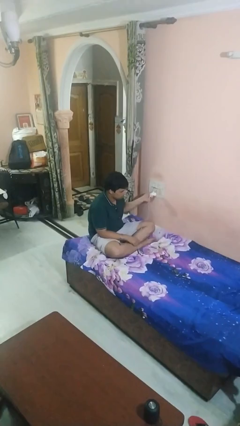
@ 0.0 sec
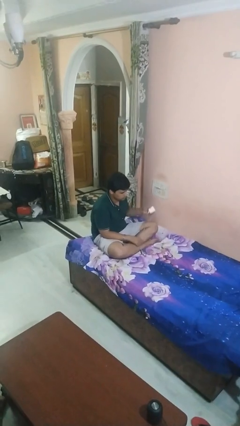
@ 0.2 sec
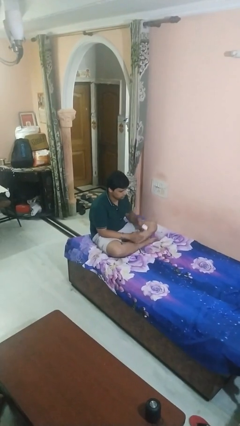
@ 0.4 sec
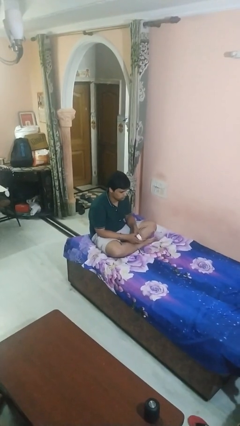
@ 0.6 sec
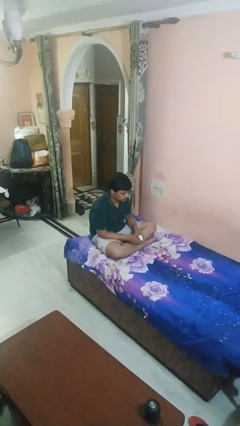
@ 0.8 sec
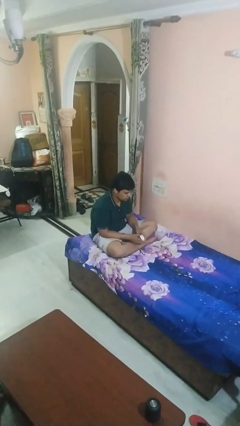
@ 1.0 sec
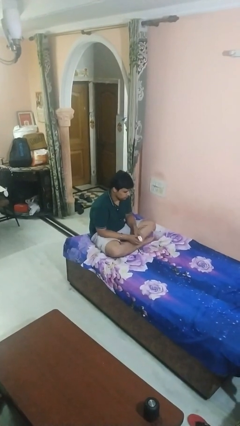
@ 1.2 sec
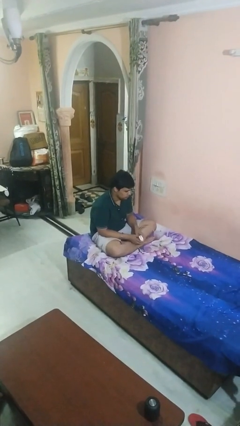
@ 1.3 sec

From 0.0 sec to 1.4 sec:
person unplugs from electrical socket

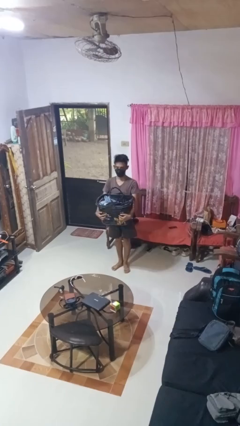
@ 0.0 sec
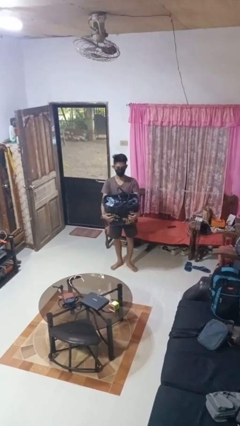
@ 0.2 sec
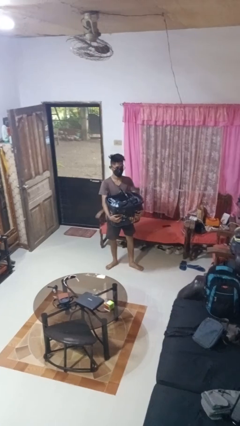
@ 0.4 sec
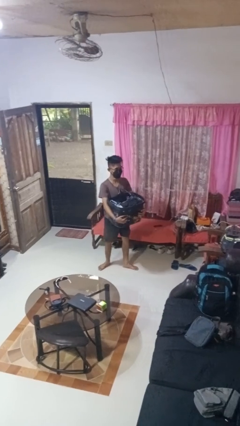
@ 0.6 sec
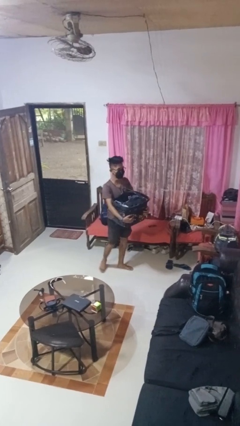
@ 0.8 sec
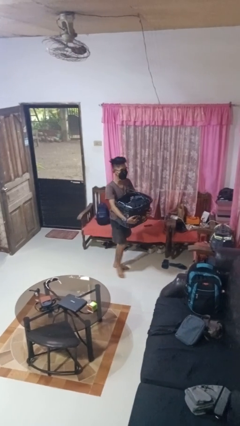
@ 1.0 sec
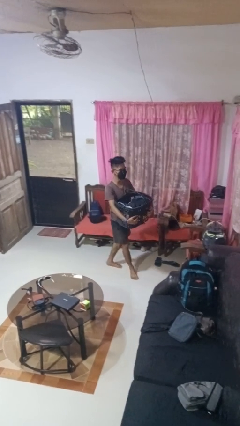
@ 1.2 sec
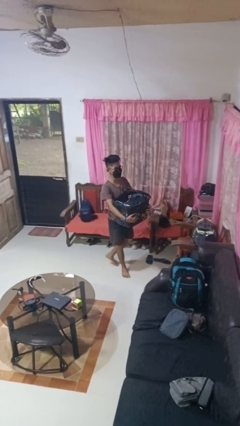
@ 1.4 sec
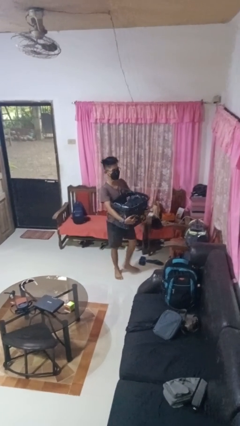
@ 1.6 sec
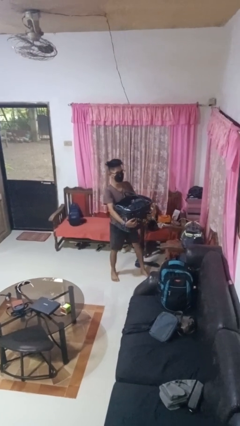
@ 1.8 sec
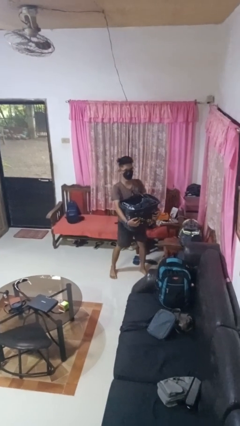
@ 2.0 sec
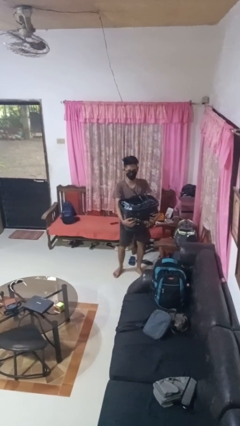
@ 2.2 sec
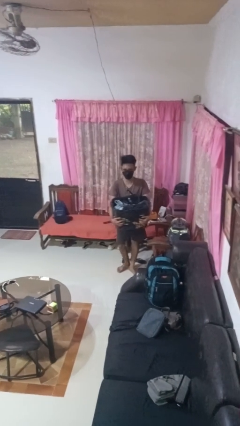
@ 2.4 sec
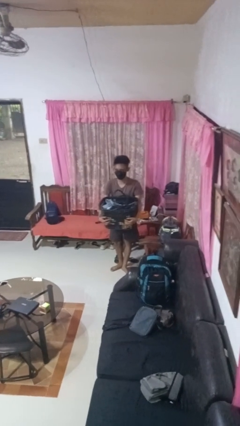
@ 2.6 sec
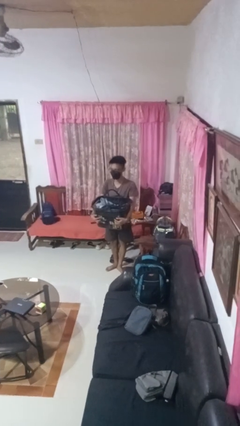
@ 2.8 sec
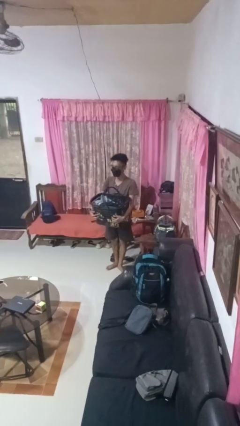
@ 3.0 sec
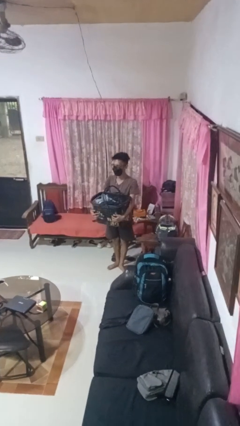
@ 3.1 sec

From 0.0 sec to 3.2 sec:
person carries laundry basket

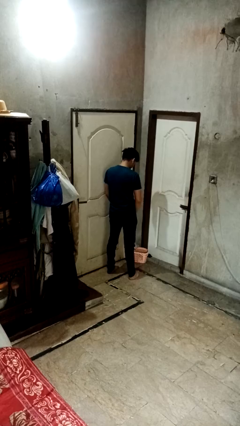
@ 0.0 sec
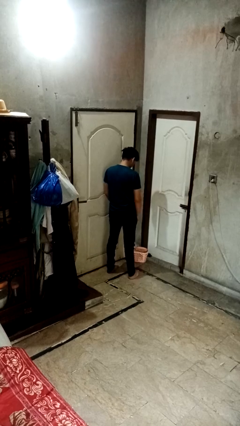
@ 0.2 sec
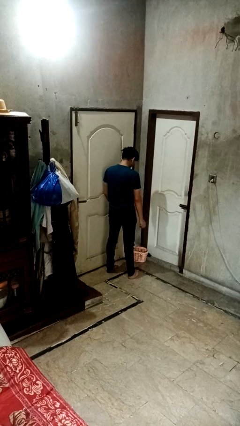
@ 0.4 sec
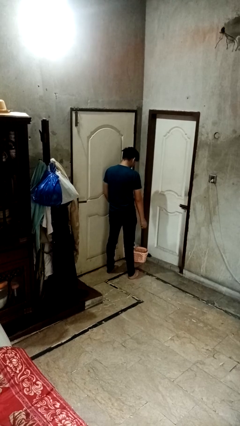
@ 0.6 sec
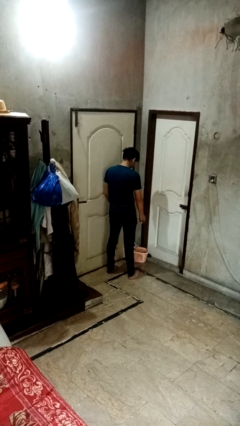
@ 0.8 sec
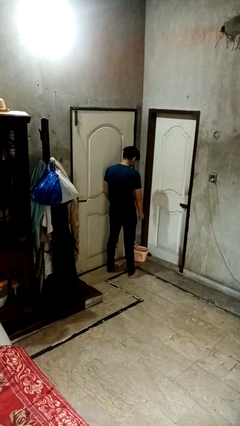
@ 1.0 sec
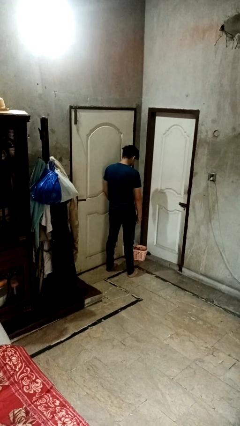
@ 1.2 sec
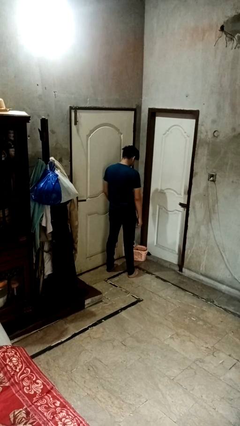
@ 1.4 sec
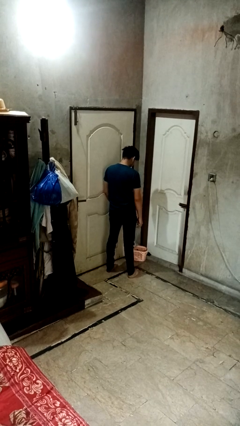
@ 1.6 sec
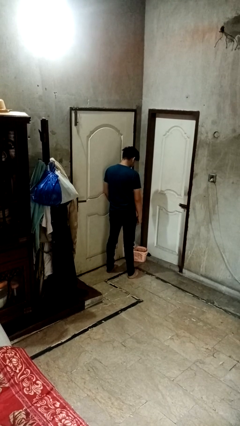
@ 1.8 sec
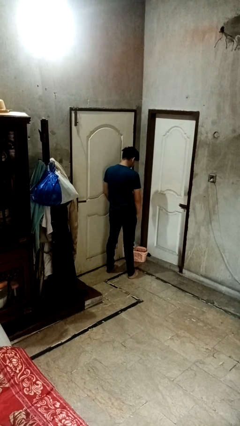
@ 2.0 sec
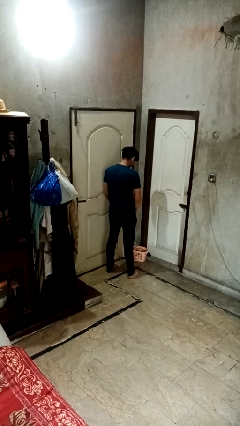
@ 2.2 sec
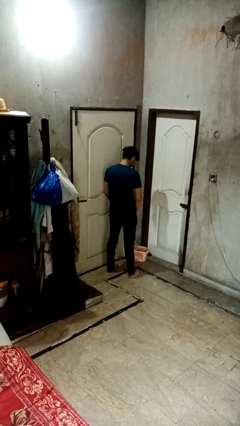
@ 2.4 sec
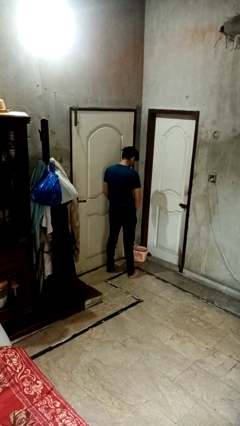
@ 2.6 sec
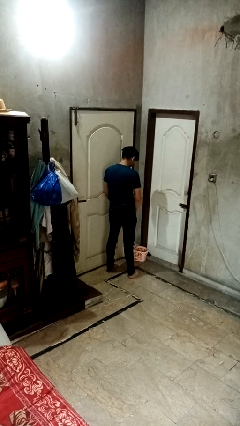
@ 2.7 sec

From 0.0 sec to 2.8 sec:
person discards trash

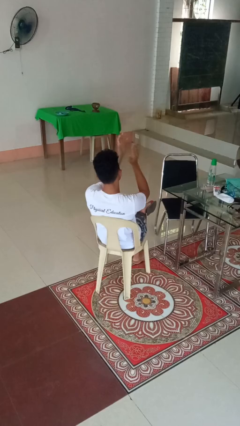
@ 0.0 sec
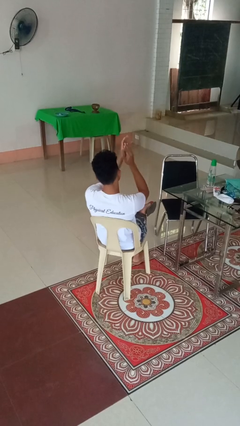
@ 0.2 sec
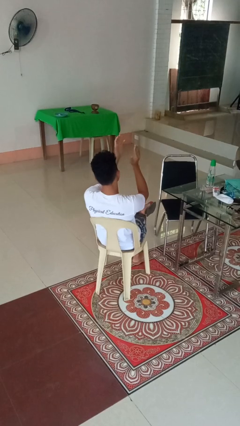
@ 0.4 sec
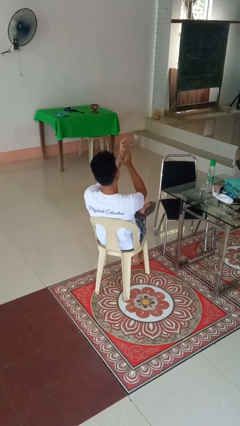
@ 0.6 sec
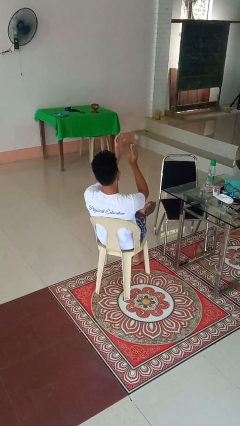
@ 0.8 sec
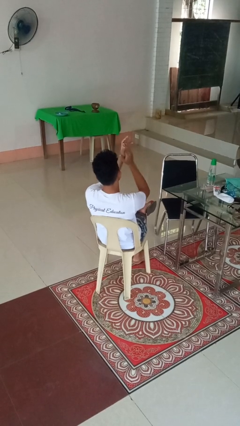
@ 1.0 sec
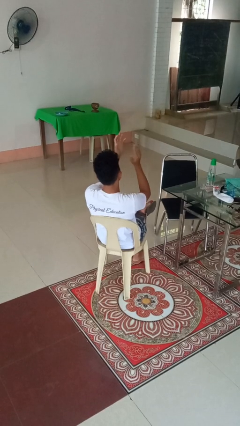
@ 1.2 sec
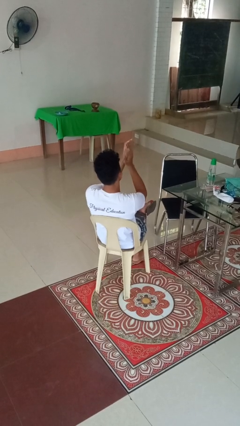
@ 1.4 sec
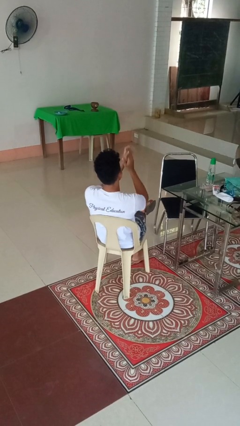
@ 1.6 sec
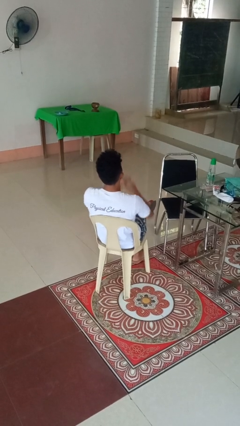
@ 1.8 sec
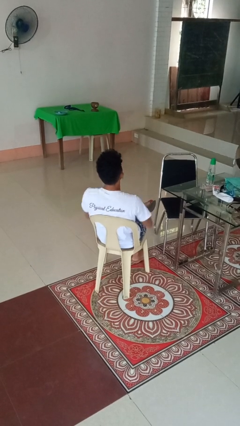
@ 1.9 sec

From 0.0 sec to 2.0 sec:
person claps hands

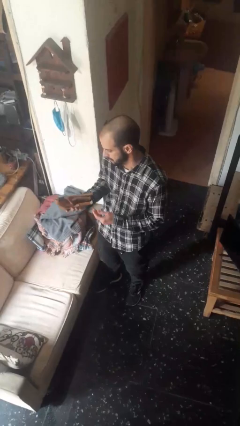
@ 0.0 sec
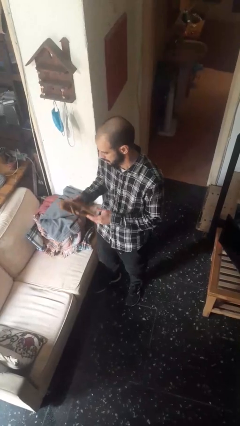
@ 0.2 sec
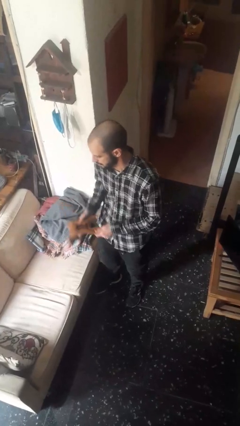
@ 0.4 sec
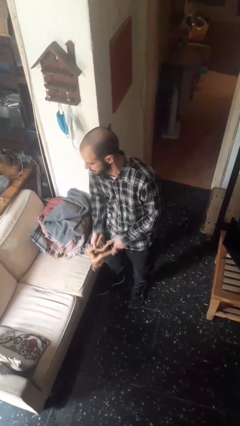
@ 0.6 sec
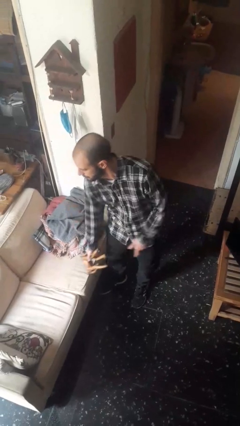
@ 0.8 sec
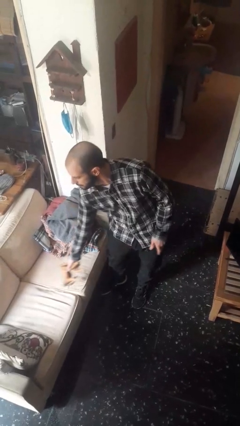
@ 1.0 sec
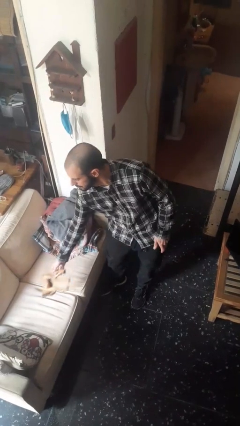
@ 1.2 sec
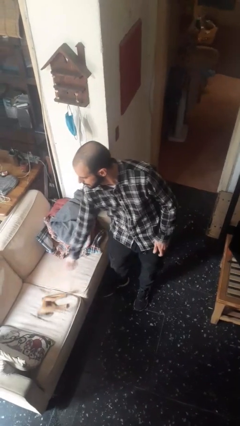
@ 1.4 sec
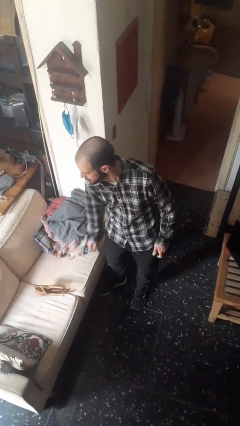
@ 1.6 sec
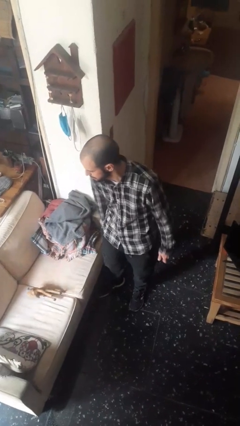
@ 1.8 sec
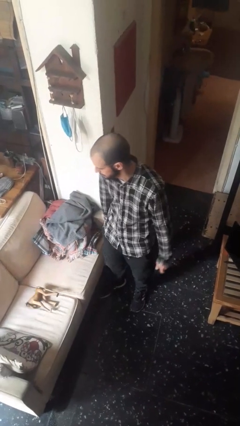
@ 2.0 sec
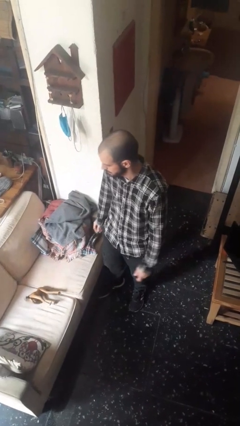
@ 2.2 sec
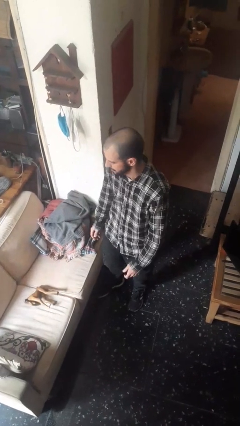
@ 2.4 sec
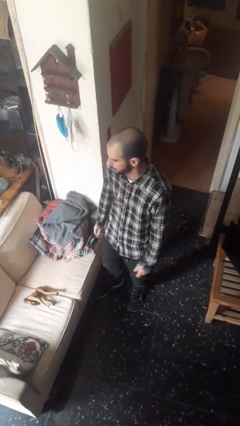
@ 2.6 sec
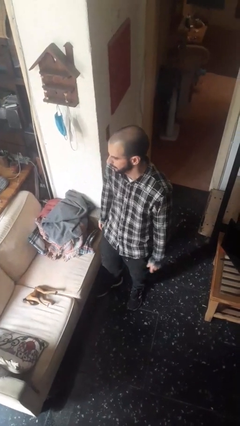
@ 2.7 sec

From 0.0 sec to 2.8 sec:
person puts down object on couch

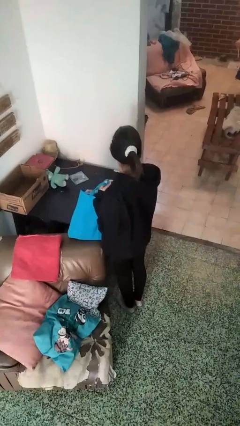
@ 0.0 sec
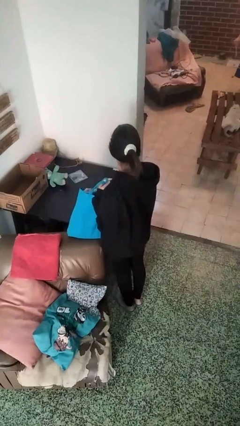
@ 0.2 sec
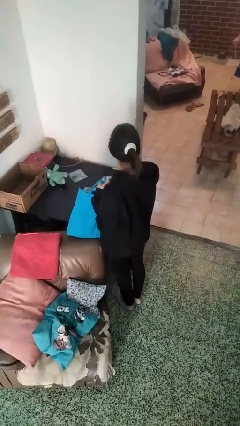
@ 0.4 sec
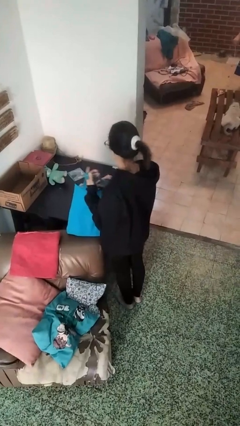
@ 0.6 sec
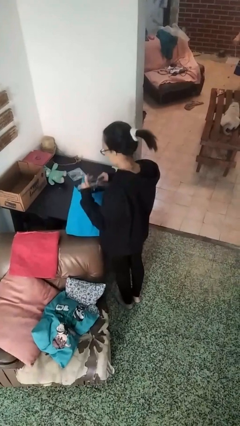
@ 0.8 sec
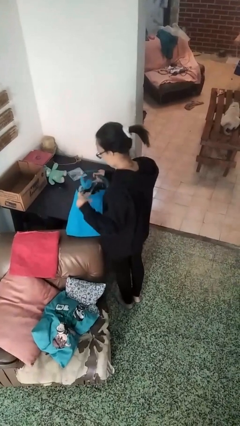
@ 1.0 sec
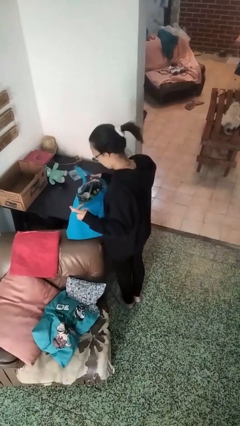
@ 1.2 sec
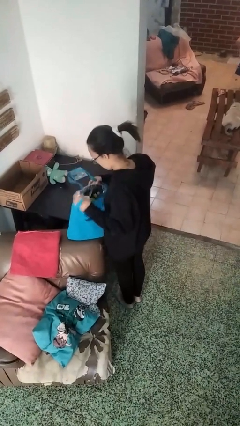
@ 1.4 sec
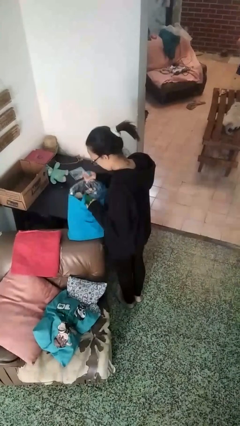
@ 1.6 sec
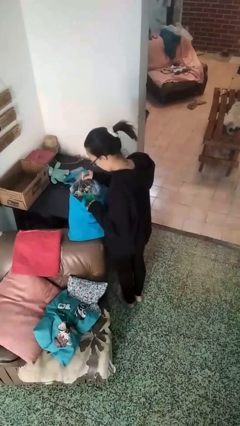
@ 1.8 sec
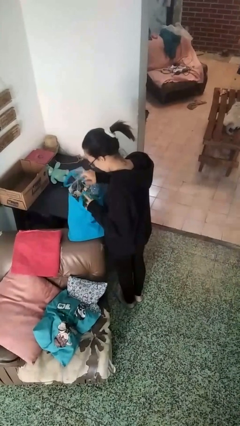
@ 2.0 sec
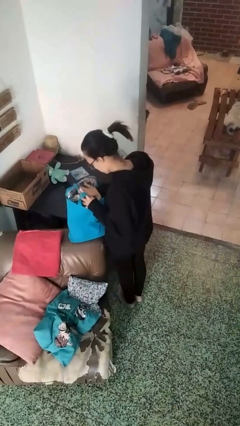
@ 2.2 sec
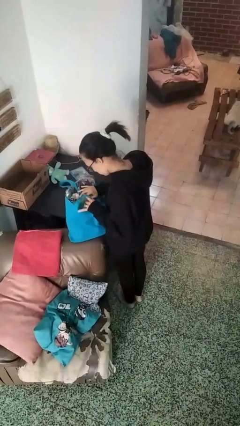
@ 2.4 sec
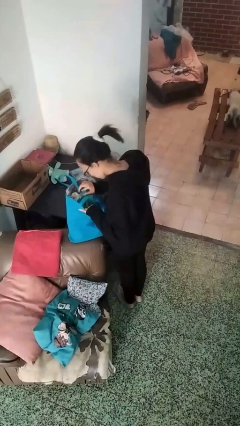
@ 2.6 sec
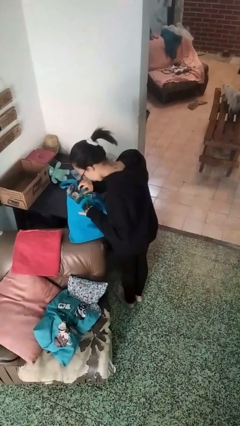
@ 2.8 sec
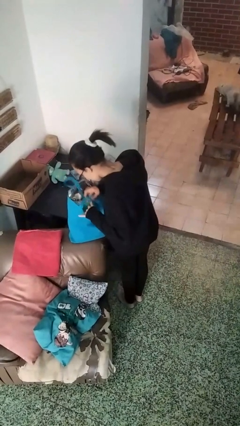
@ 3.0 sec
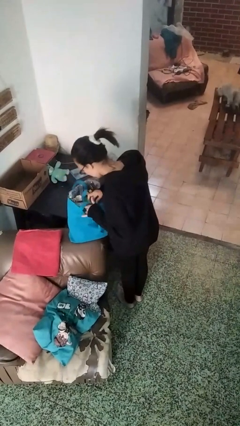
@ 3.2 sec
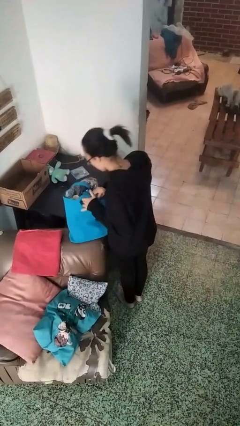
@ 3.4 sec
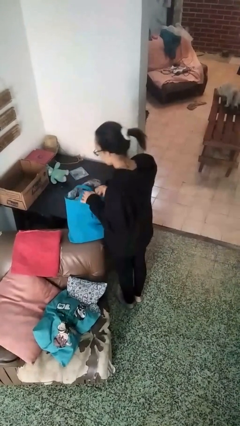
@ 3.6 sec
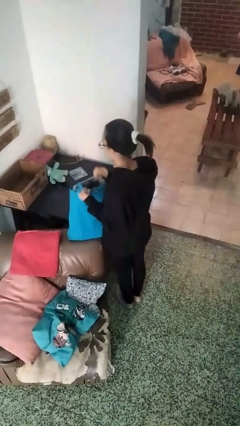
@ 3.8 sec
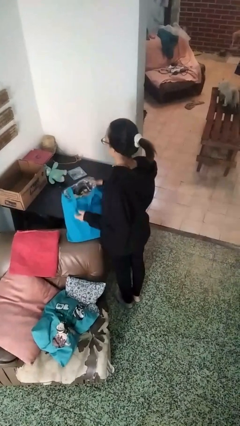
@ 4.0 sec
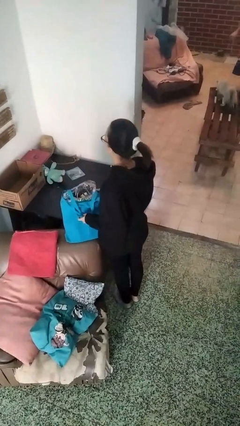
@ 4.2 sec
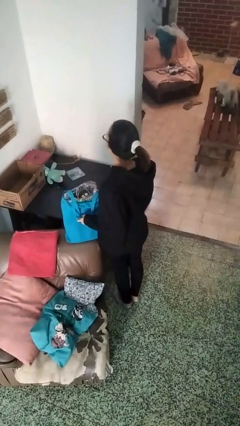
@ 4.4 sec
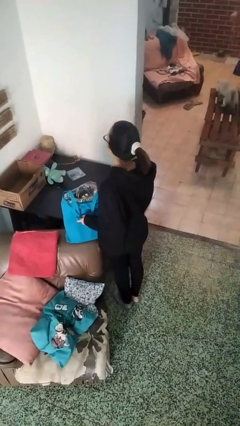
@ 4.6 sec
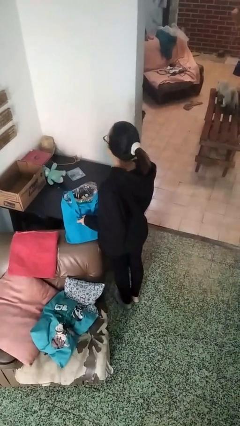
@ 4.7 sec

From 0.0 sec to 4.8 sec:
person searches in bag
